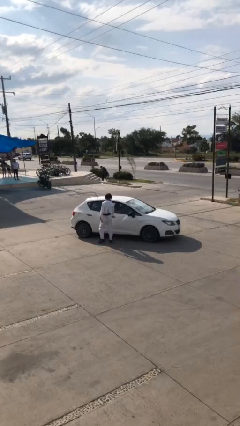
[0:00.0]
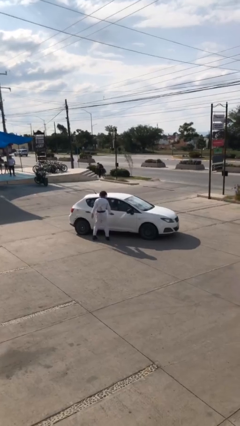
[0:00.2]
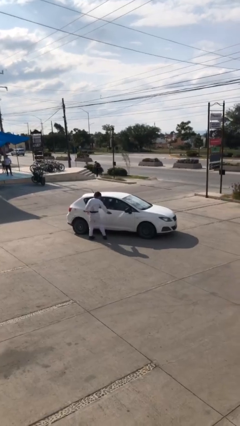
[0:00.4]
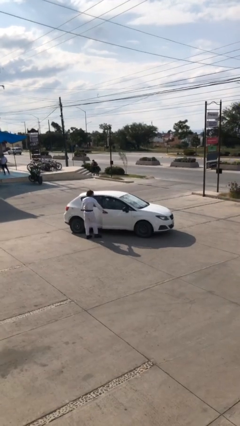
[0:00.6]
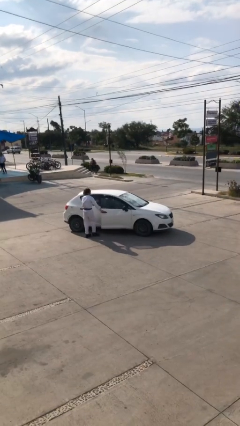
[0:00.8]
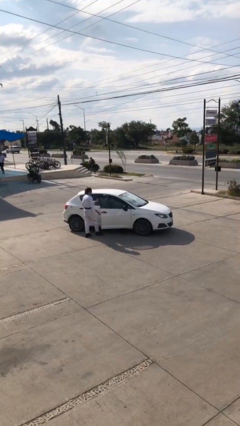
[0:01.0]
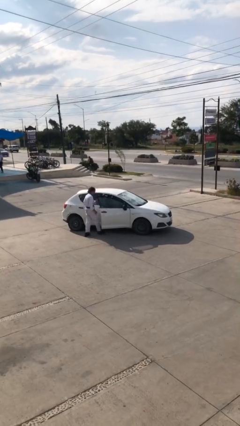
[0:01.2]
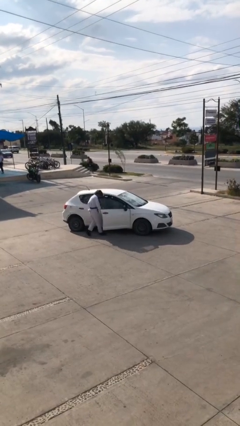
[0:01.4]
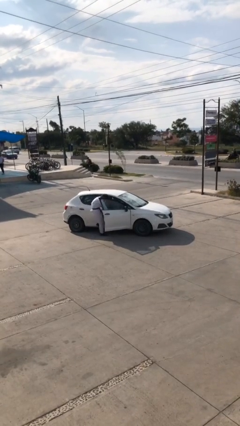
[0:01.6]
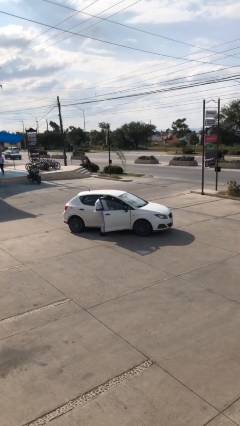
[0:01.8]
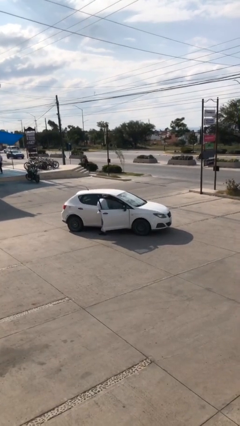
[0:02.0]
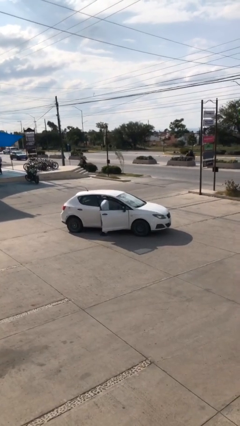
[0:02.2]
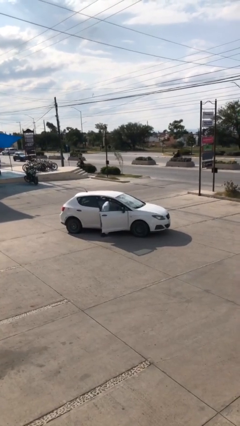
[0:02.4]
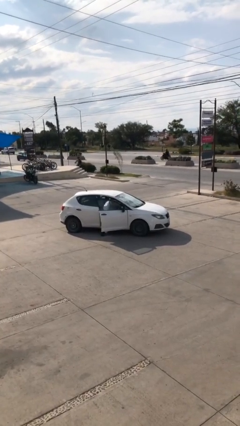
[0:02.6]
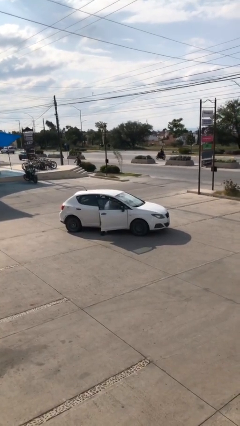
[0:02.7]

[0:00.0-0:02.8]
car picks up person

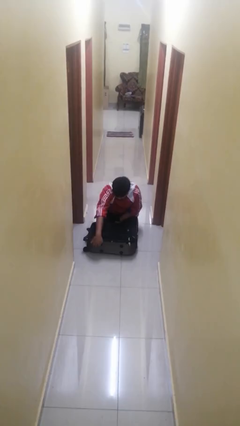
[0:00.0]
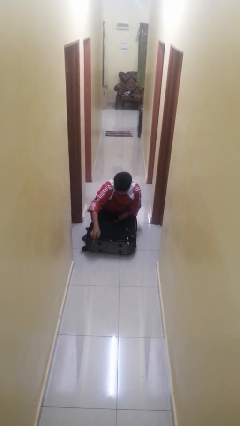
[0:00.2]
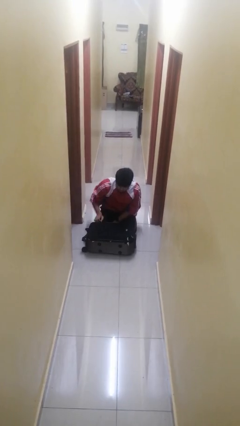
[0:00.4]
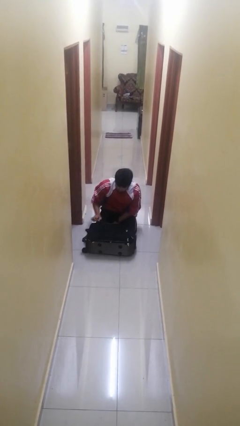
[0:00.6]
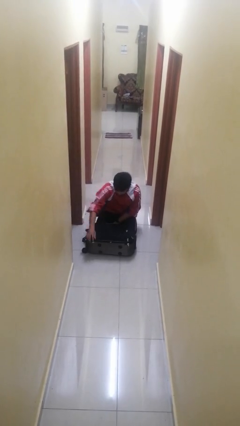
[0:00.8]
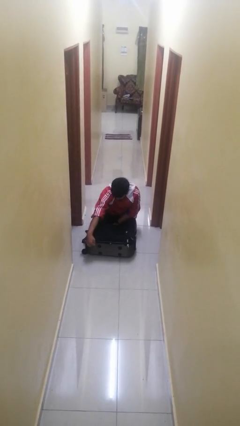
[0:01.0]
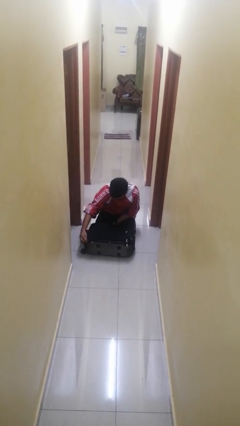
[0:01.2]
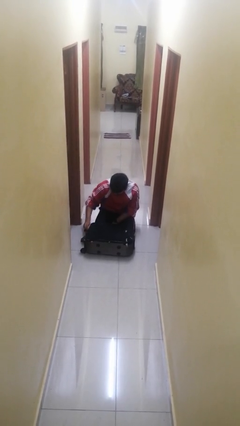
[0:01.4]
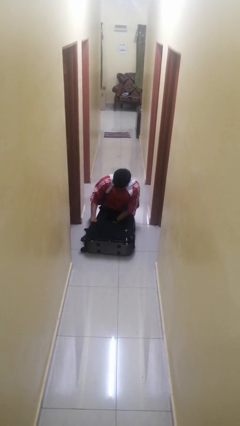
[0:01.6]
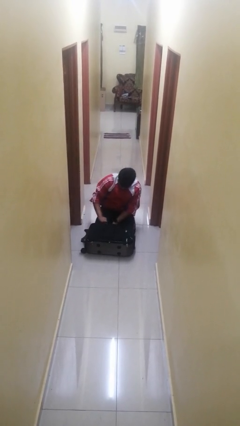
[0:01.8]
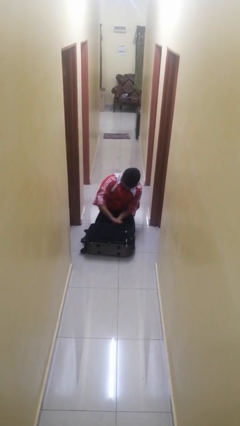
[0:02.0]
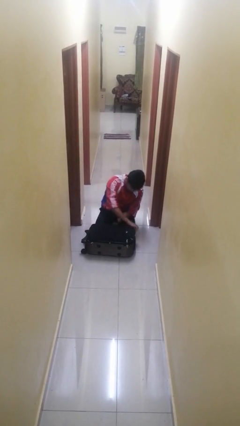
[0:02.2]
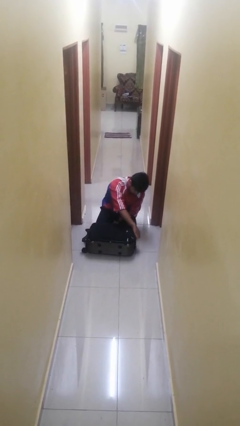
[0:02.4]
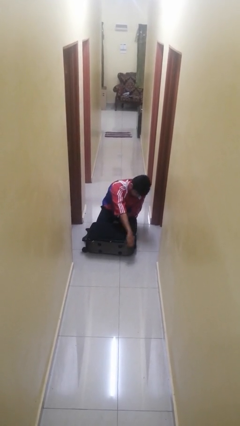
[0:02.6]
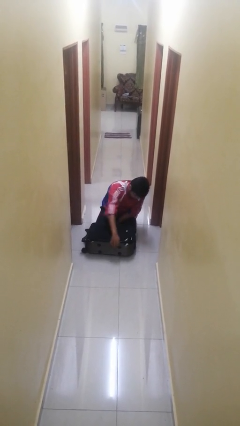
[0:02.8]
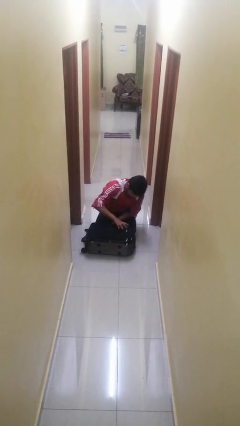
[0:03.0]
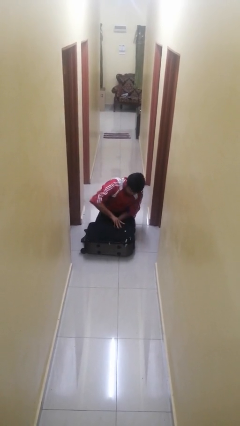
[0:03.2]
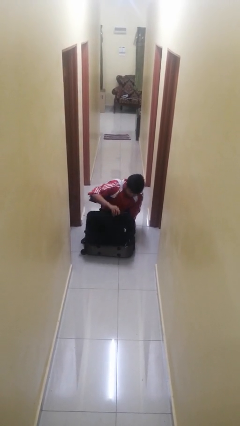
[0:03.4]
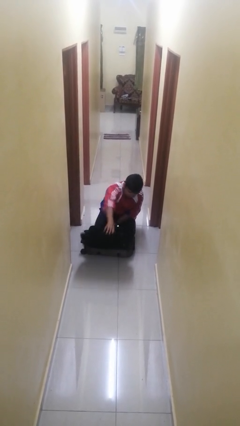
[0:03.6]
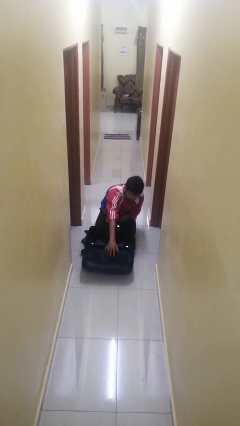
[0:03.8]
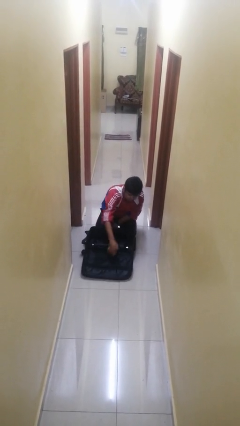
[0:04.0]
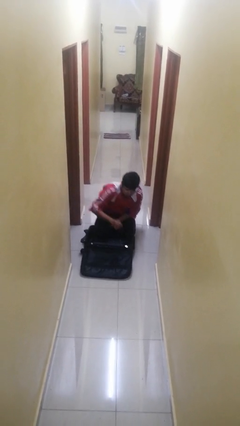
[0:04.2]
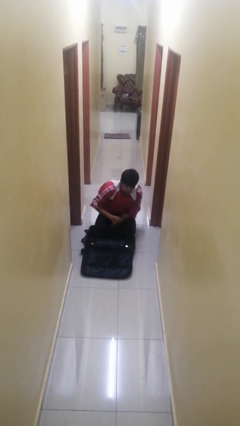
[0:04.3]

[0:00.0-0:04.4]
person opens suitcase

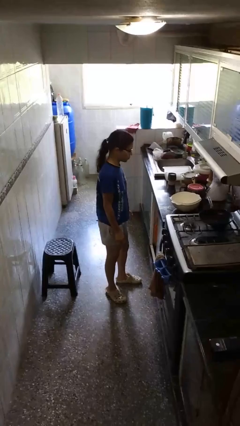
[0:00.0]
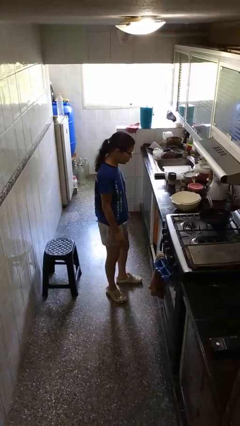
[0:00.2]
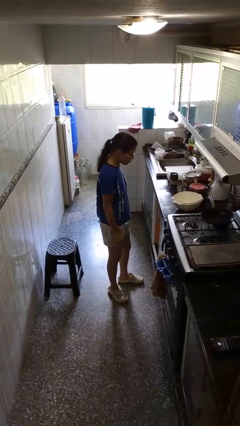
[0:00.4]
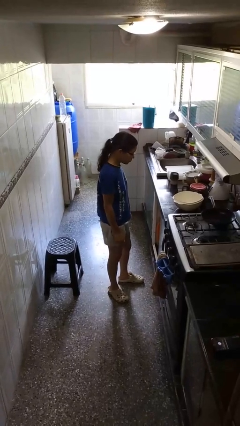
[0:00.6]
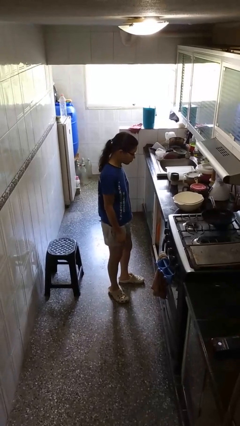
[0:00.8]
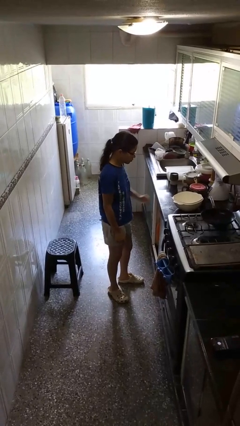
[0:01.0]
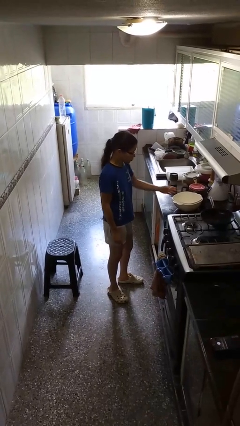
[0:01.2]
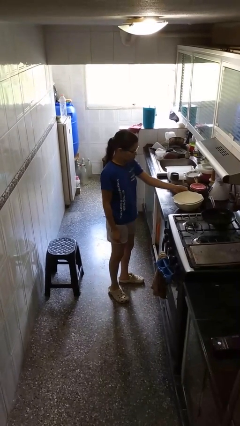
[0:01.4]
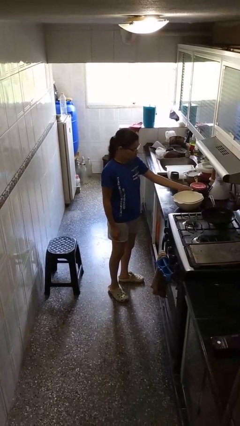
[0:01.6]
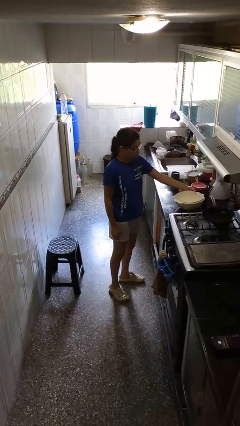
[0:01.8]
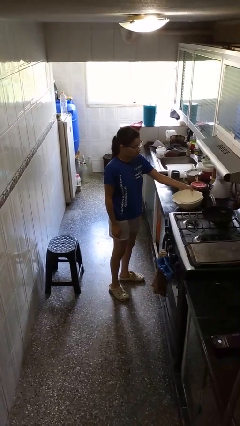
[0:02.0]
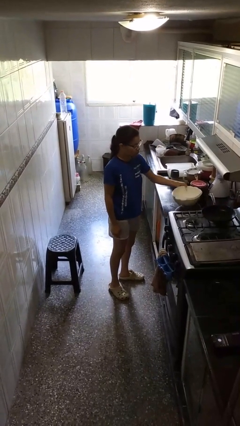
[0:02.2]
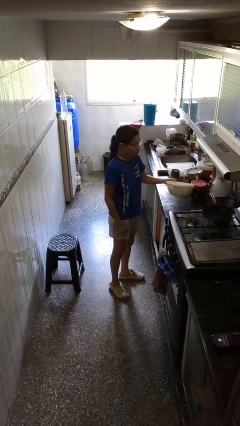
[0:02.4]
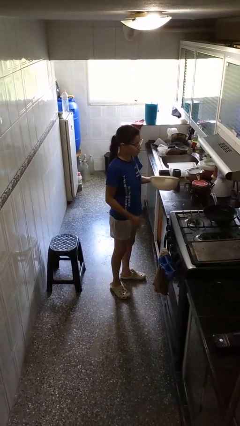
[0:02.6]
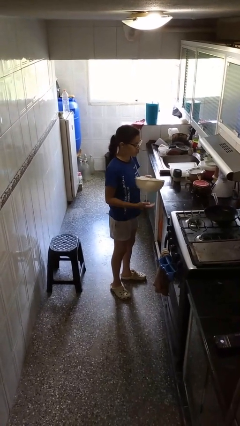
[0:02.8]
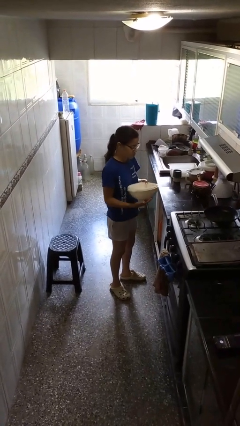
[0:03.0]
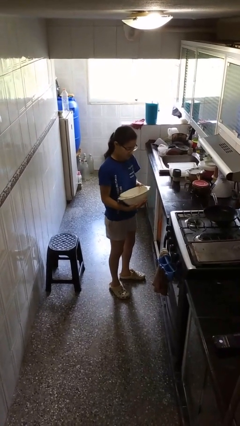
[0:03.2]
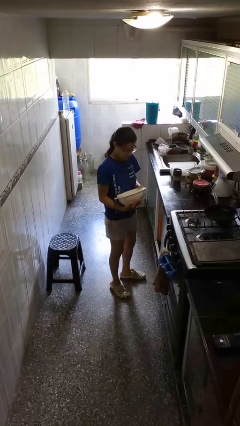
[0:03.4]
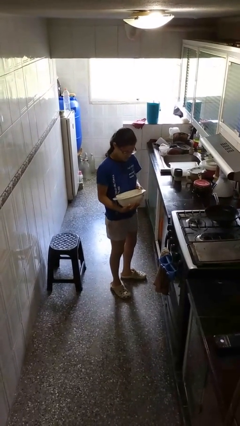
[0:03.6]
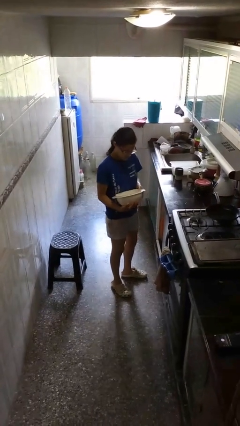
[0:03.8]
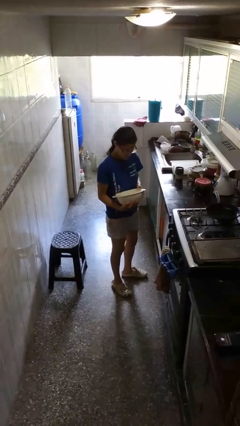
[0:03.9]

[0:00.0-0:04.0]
person picks up object from countertop

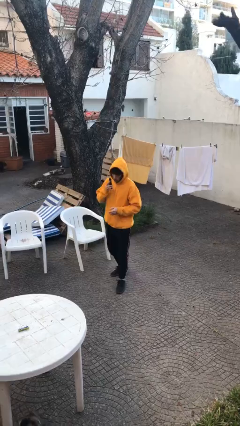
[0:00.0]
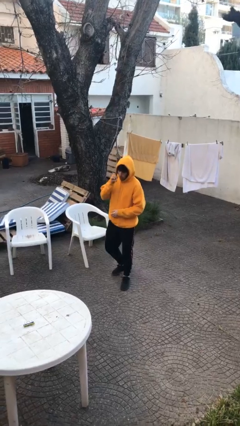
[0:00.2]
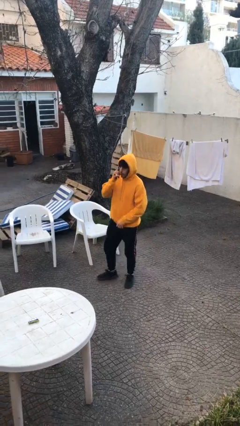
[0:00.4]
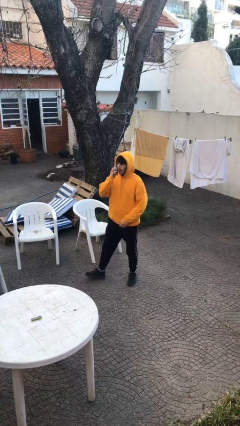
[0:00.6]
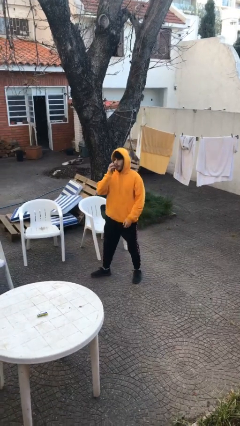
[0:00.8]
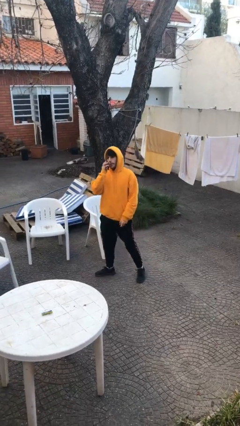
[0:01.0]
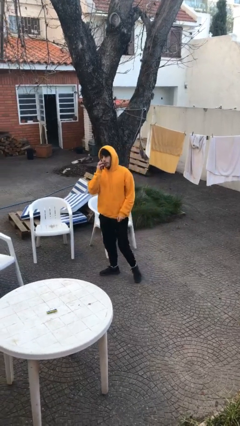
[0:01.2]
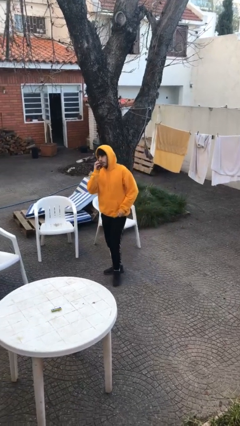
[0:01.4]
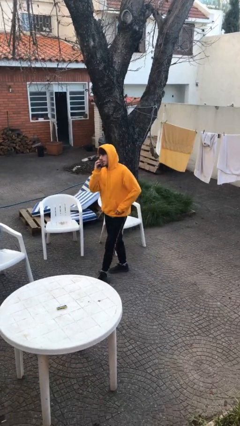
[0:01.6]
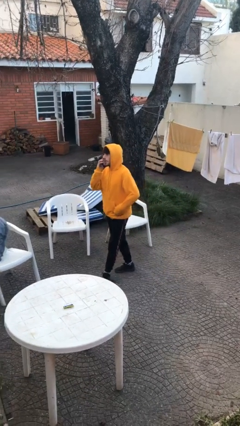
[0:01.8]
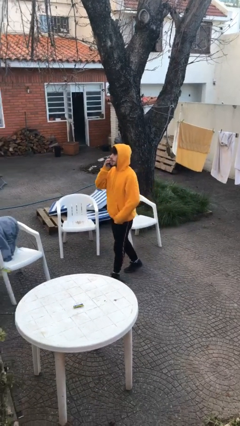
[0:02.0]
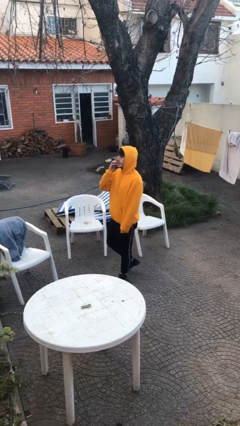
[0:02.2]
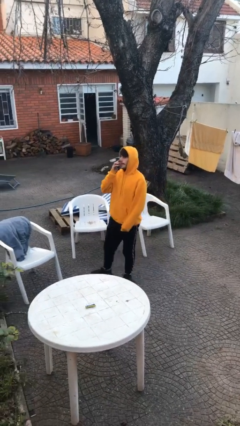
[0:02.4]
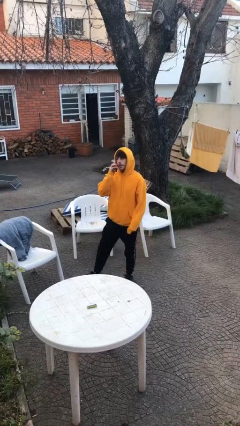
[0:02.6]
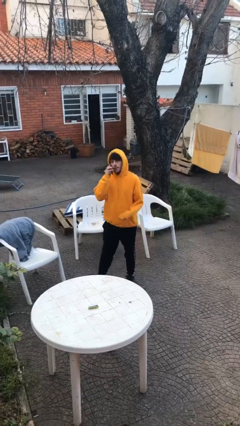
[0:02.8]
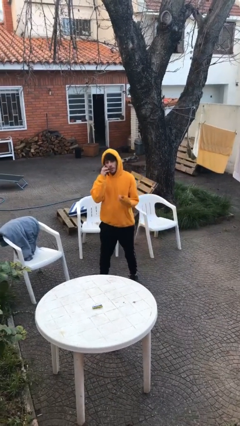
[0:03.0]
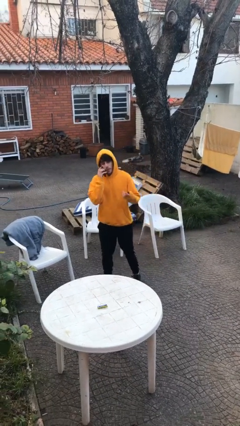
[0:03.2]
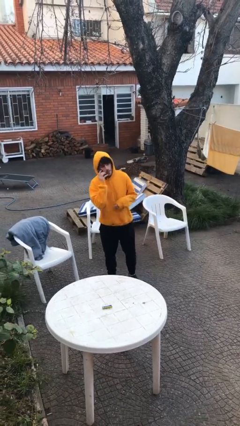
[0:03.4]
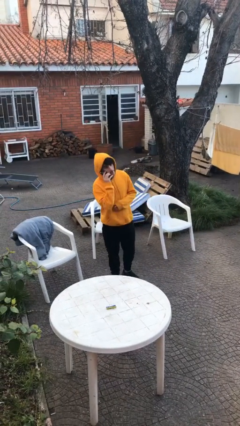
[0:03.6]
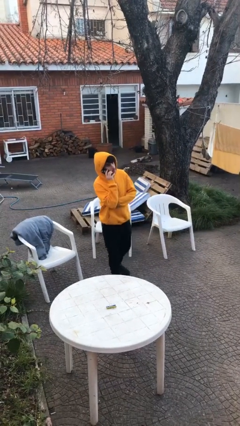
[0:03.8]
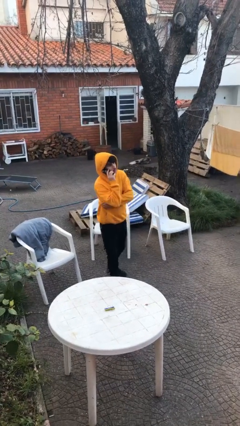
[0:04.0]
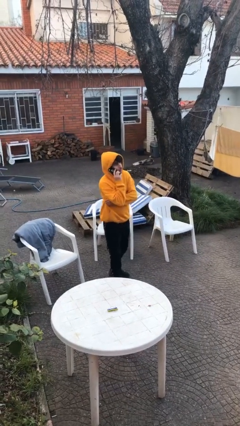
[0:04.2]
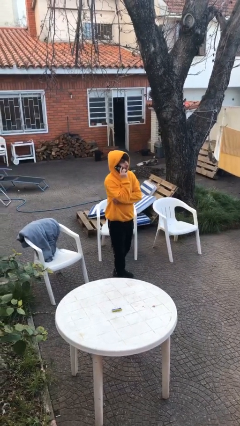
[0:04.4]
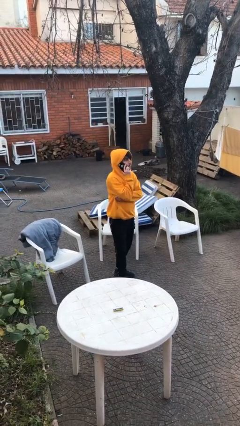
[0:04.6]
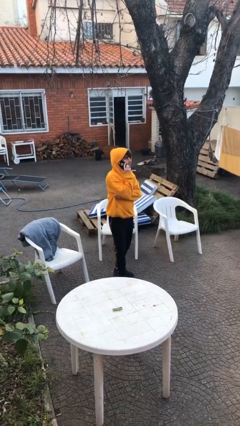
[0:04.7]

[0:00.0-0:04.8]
person talks on phone

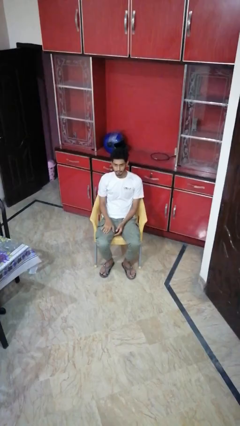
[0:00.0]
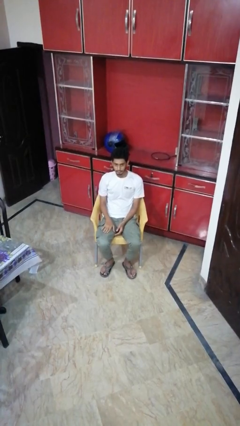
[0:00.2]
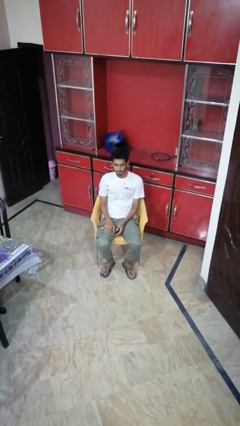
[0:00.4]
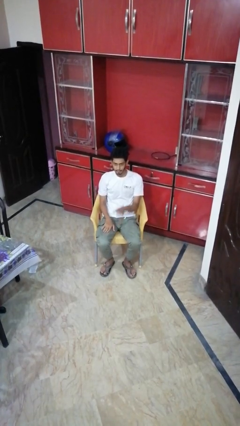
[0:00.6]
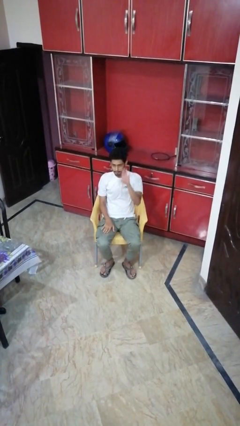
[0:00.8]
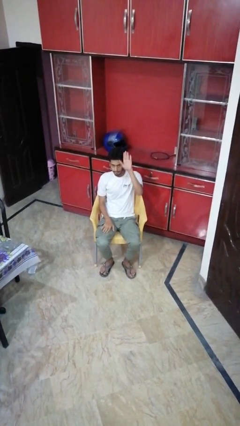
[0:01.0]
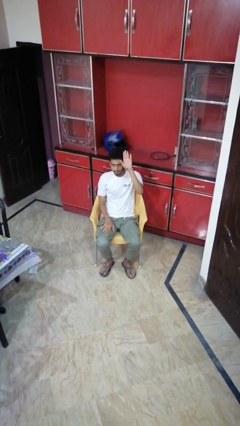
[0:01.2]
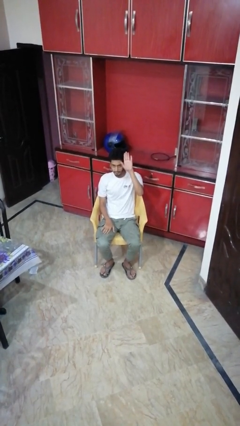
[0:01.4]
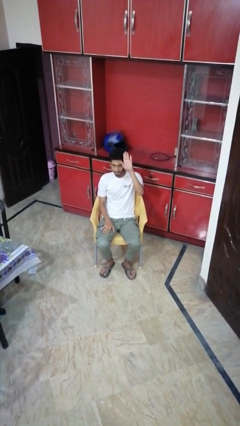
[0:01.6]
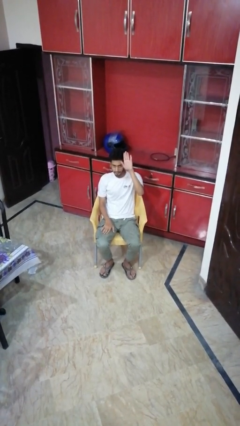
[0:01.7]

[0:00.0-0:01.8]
person gestures raise hand

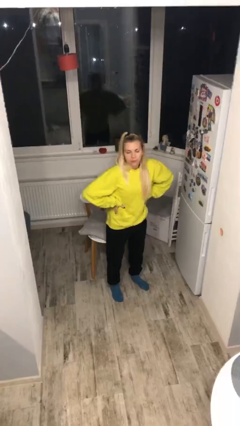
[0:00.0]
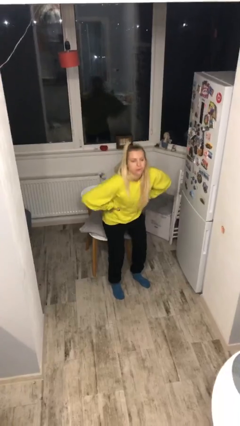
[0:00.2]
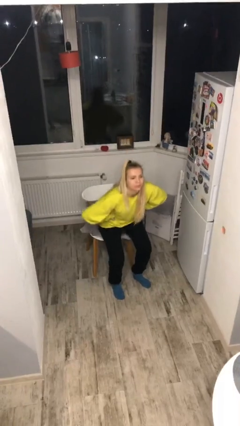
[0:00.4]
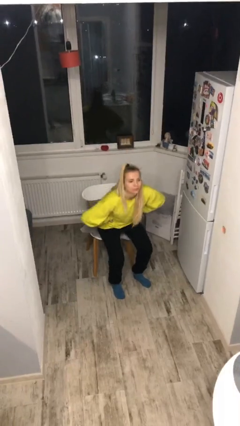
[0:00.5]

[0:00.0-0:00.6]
person sits down
